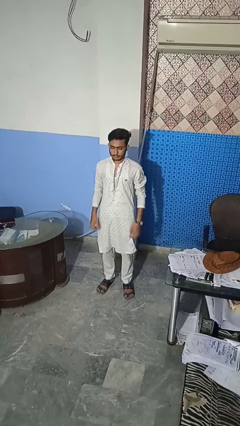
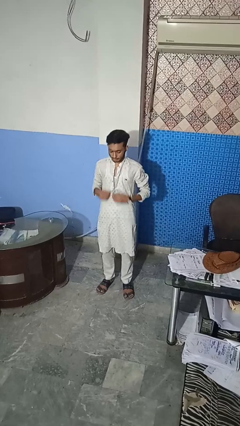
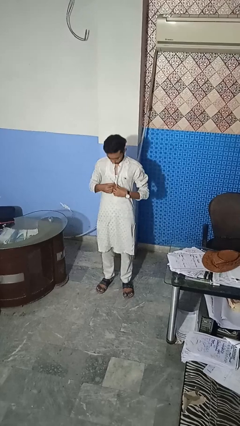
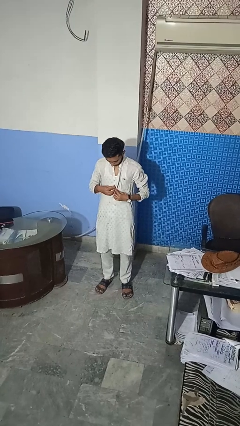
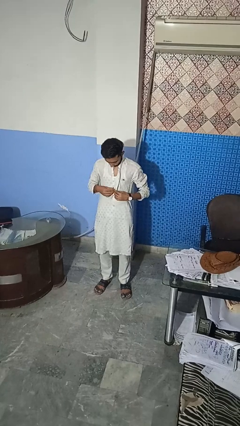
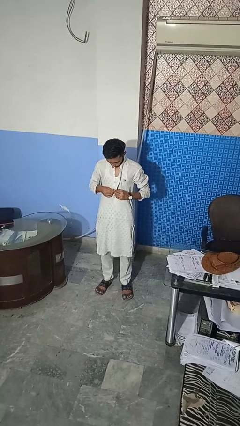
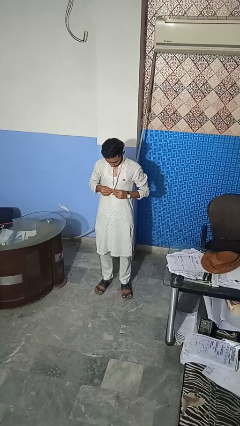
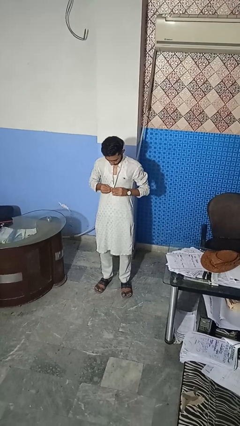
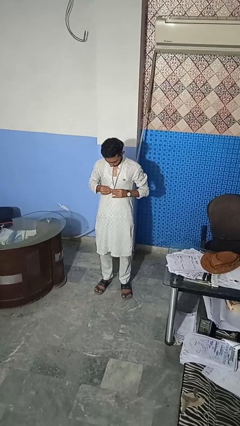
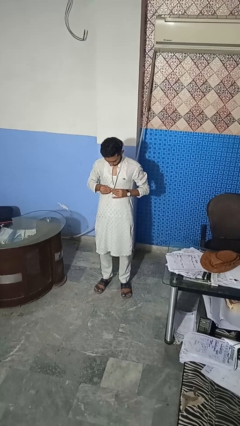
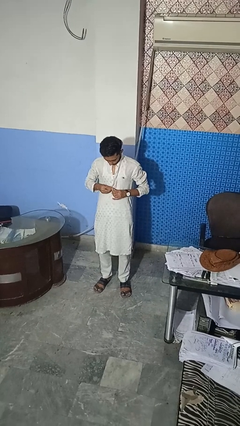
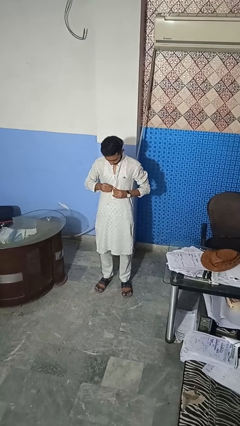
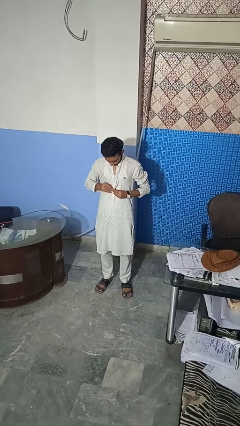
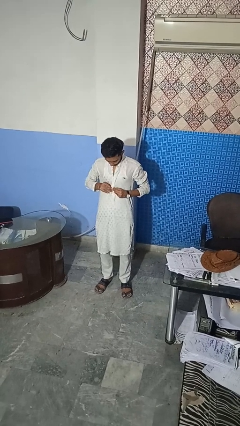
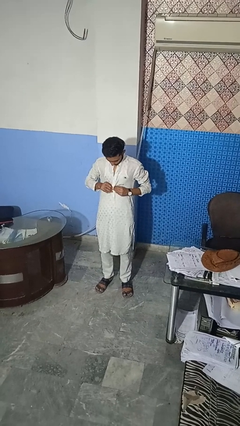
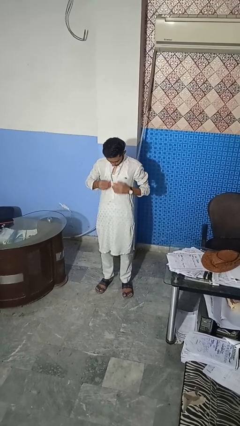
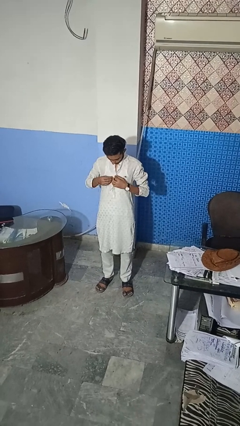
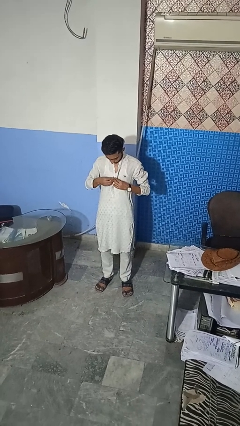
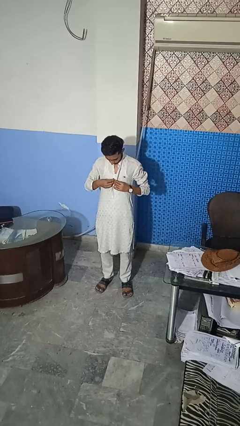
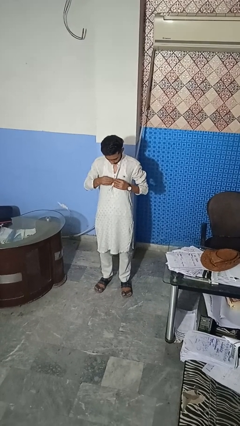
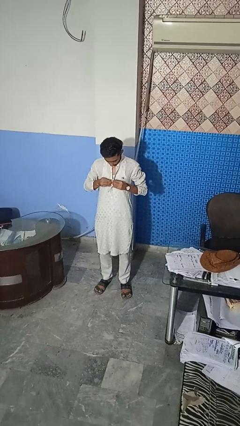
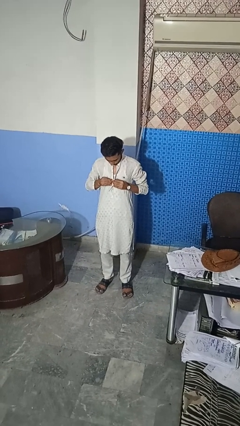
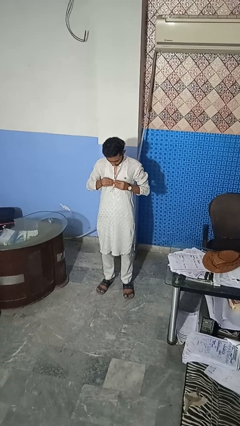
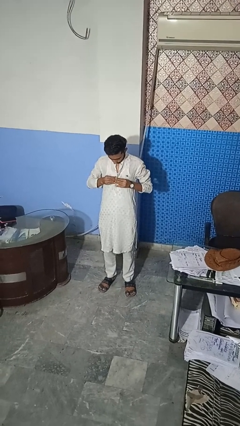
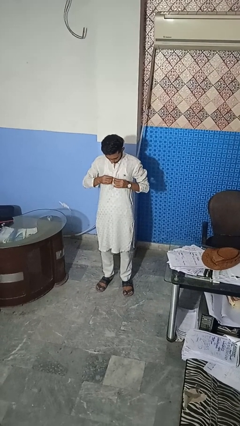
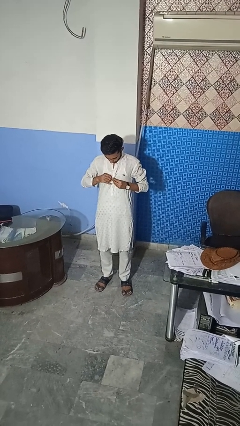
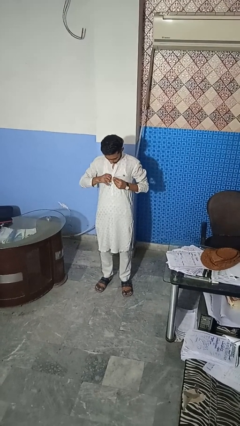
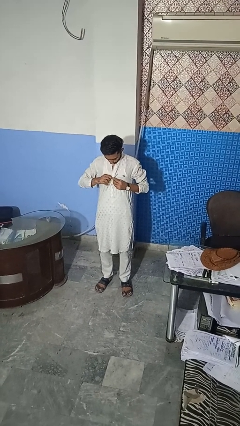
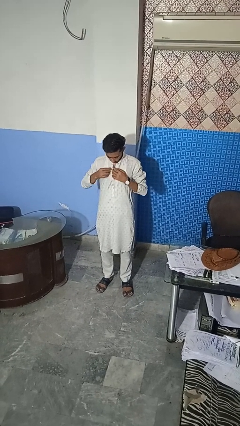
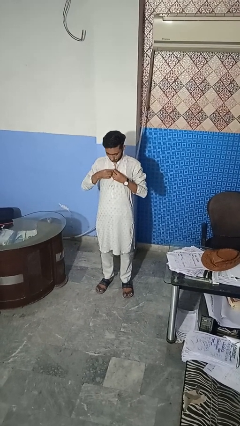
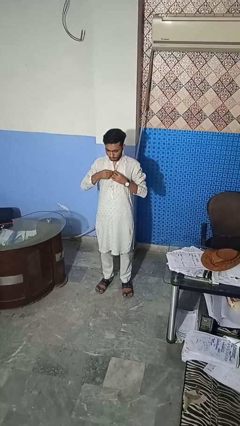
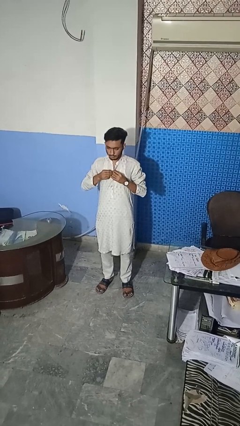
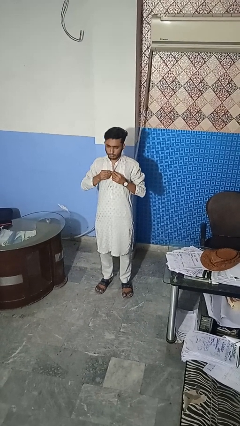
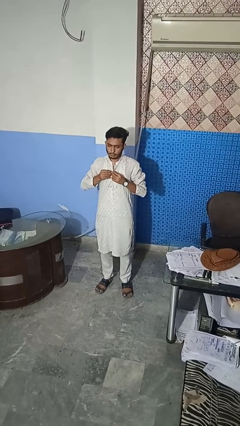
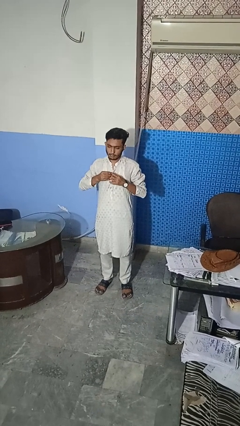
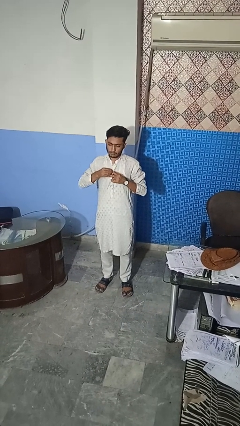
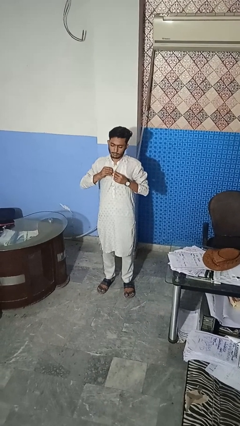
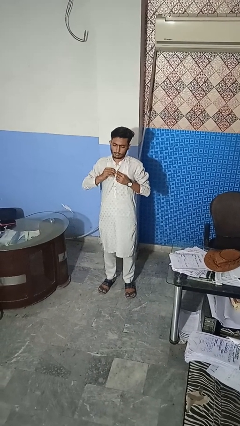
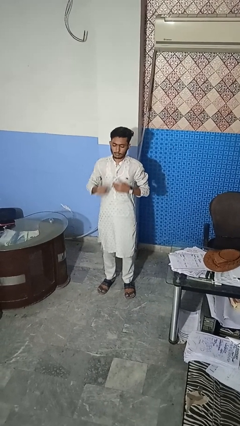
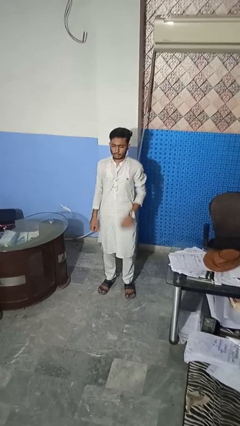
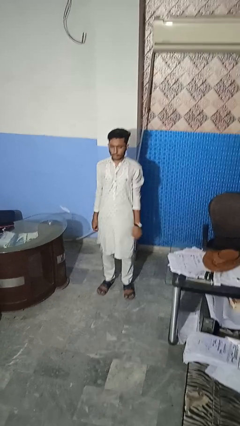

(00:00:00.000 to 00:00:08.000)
person buttons shirt

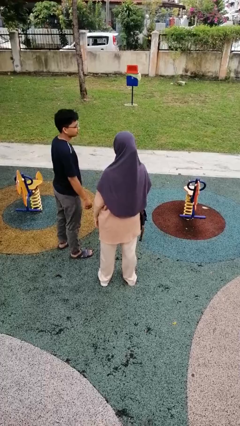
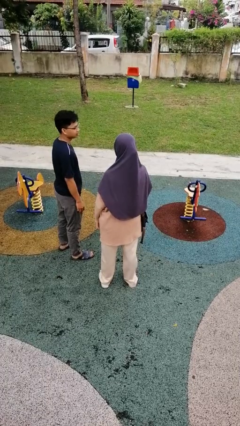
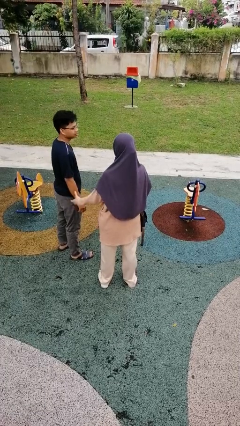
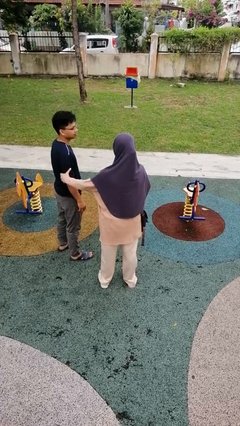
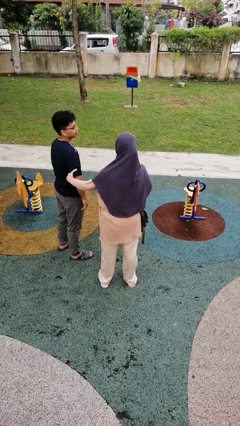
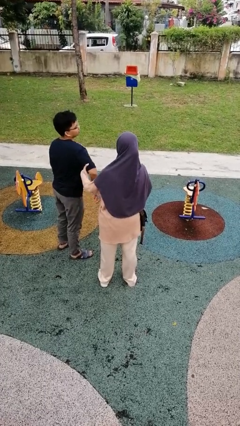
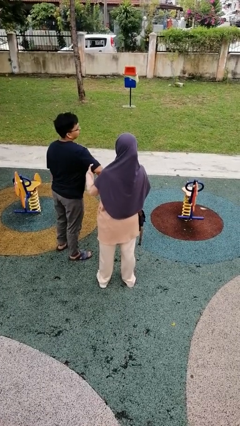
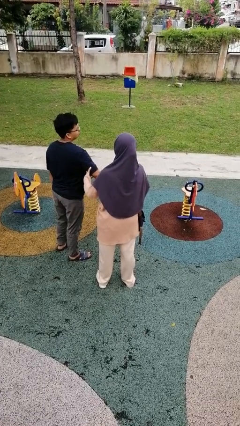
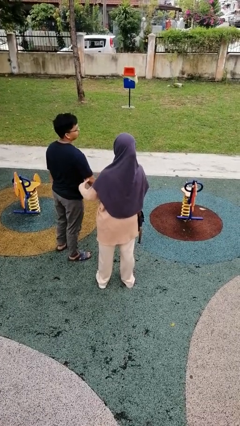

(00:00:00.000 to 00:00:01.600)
person grabs person by bicep

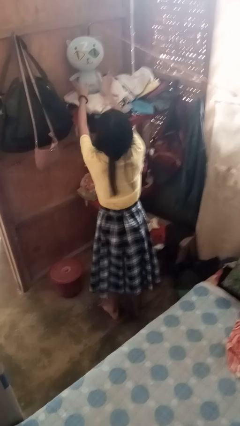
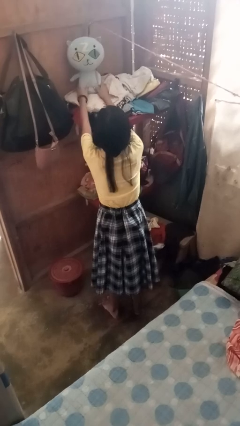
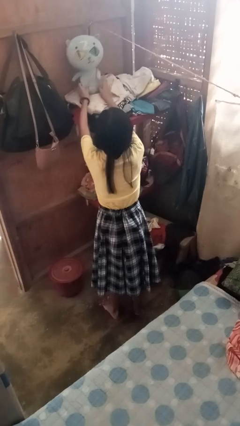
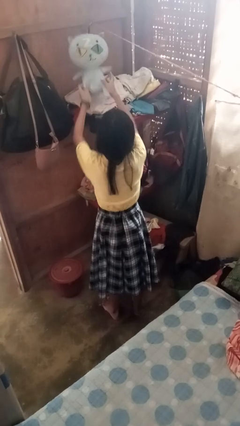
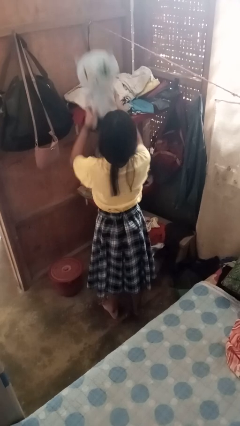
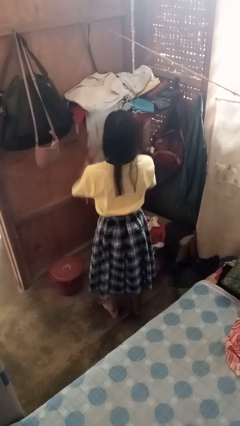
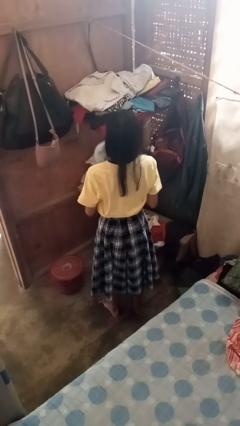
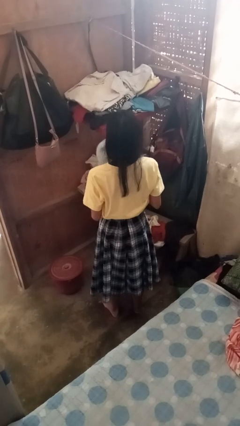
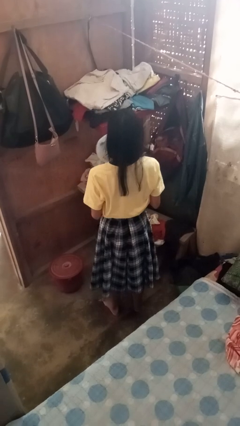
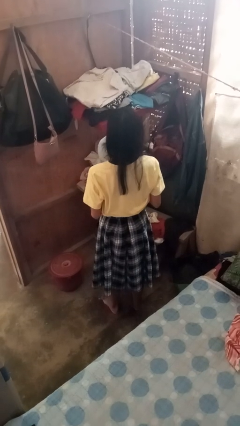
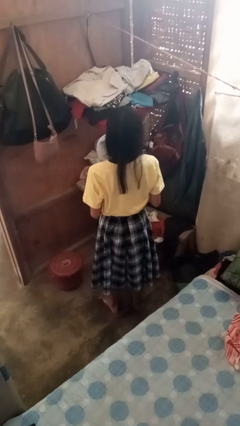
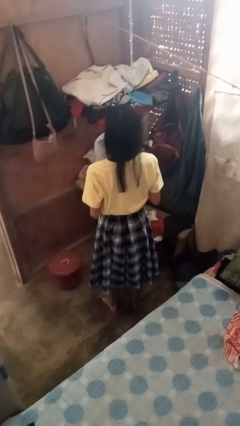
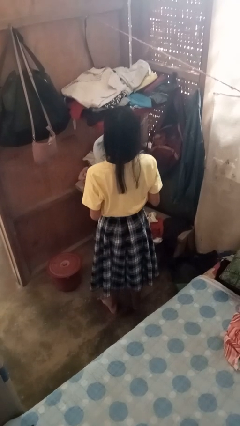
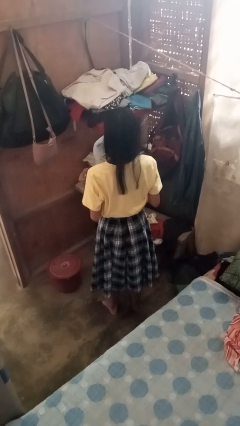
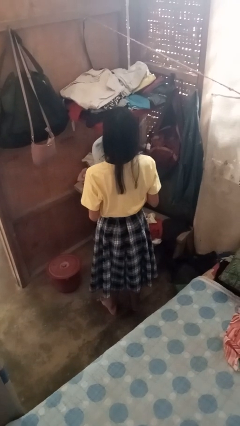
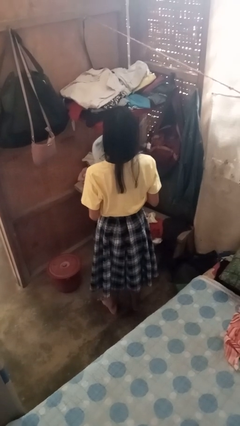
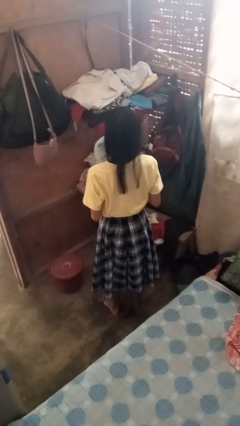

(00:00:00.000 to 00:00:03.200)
person picks up object from shelf

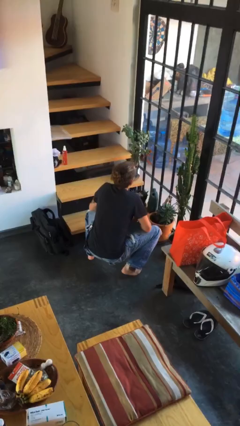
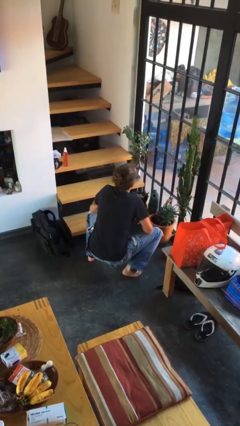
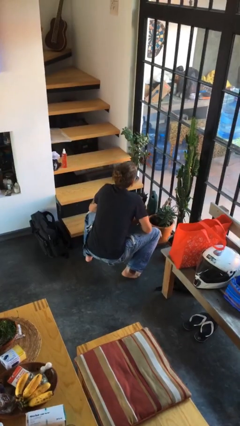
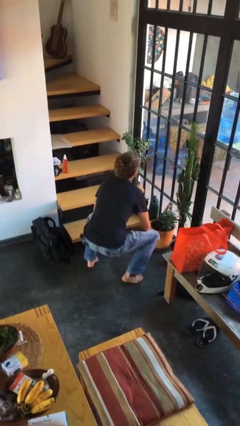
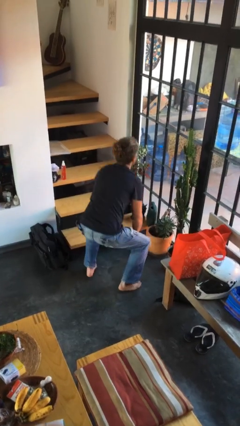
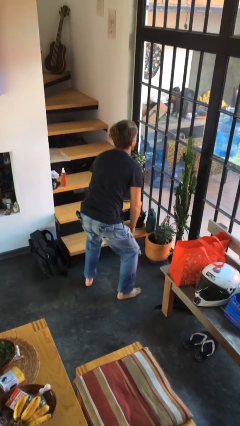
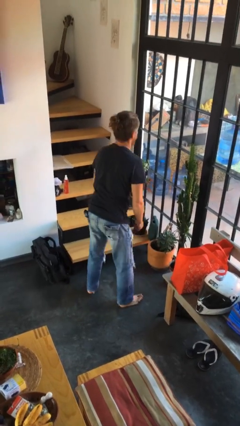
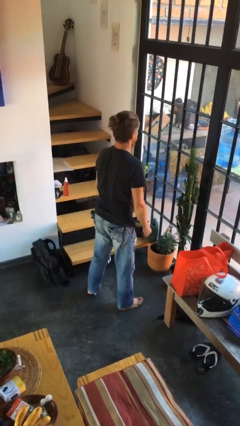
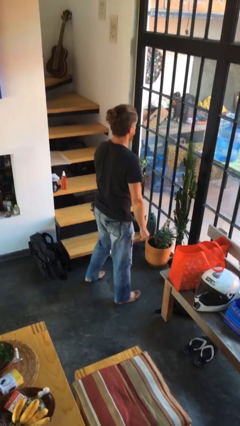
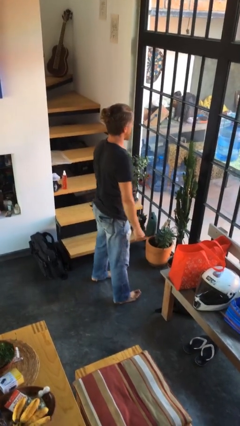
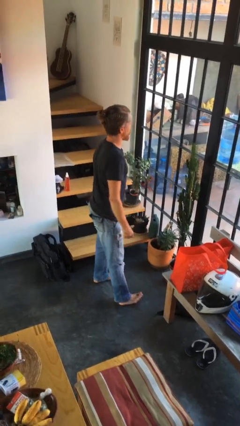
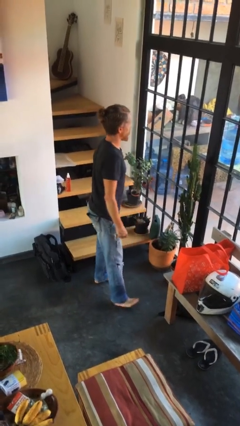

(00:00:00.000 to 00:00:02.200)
person stands up

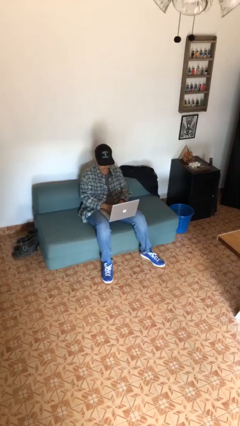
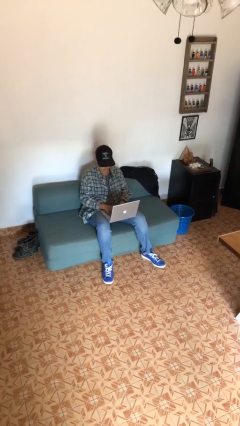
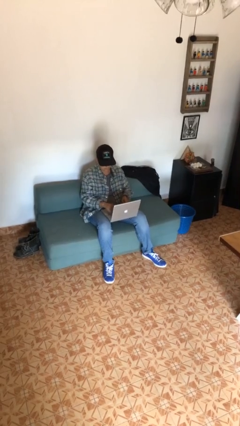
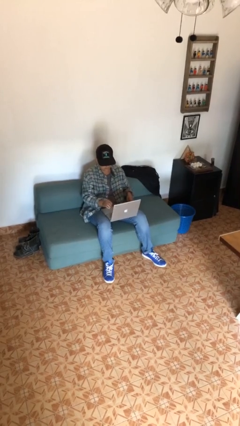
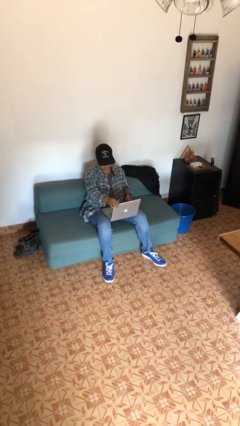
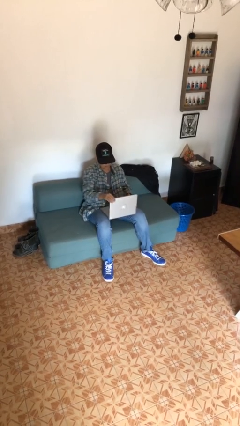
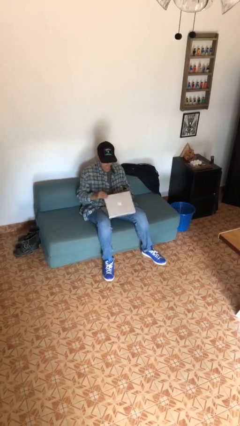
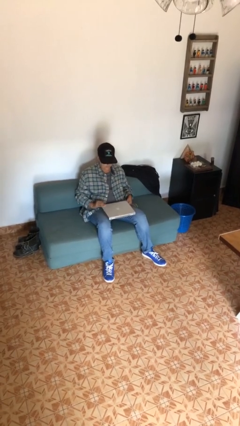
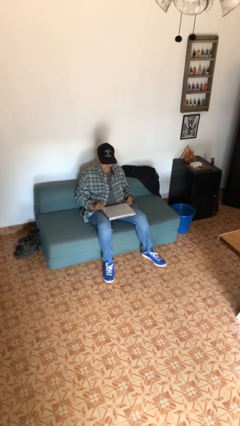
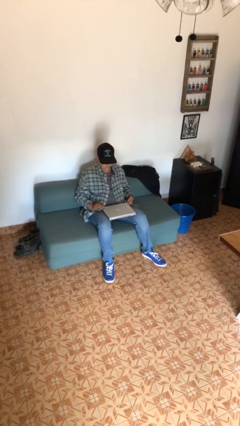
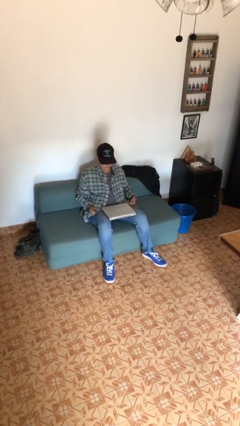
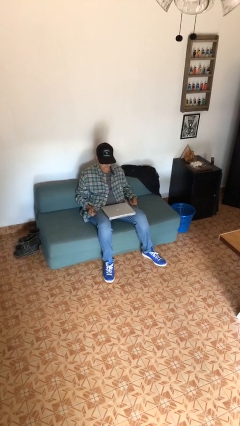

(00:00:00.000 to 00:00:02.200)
person closes laptop
